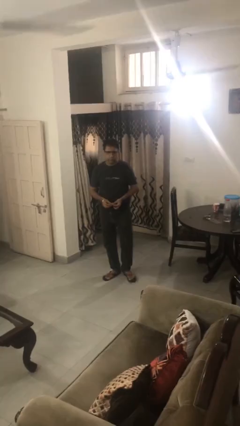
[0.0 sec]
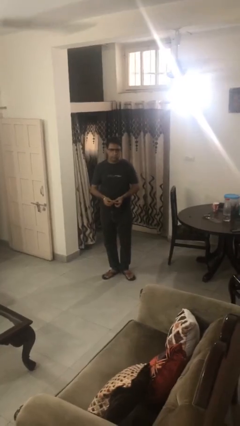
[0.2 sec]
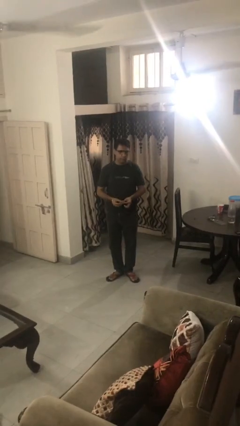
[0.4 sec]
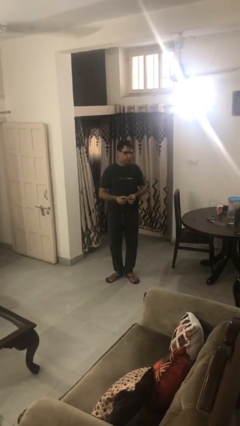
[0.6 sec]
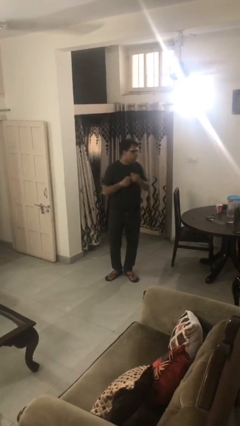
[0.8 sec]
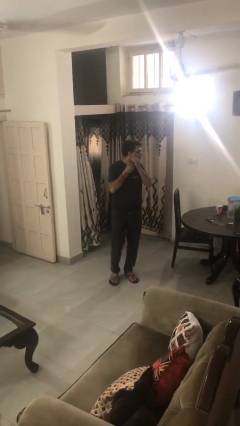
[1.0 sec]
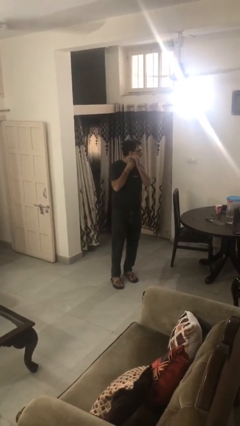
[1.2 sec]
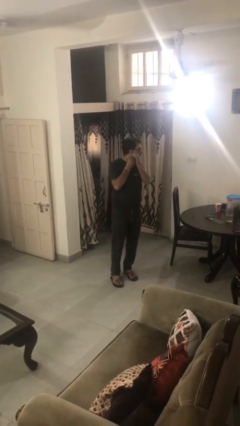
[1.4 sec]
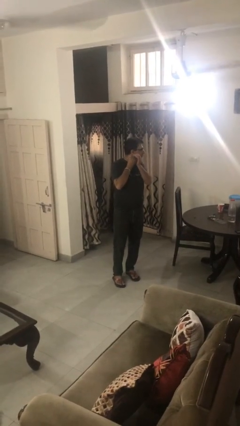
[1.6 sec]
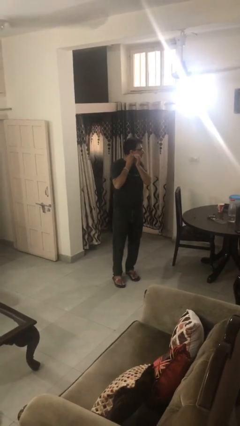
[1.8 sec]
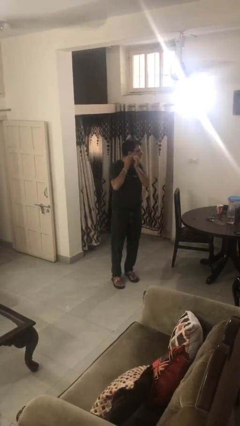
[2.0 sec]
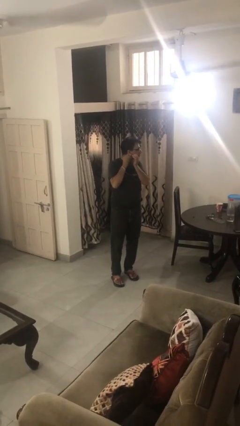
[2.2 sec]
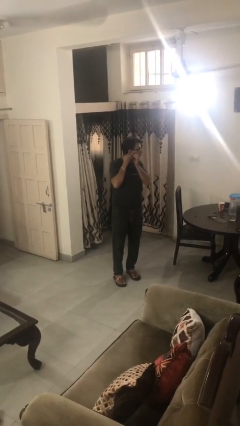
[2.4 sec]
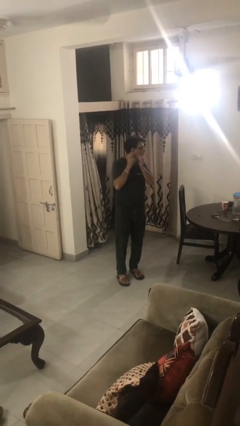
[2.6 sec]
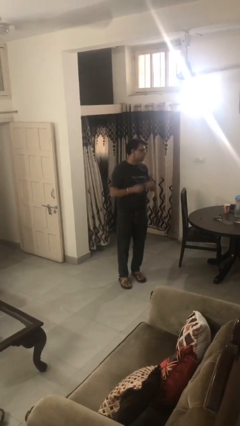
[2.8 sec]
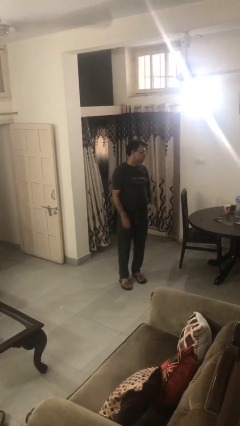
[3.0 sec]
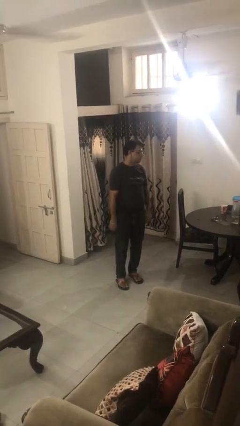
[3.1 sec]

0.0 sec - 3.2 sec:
person puts on earrings

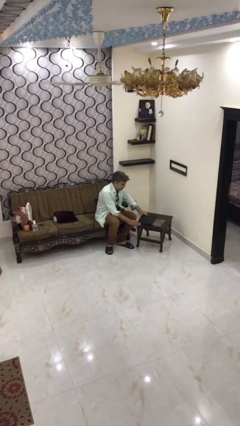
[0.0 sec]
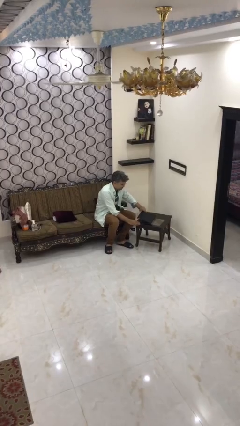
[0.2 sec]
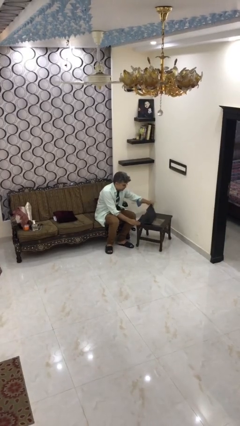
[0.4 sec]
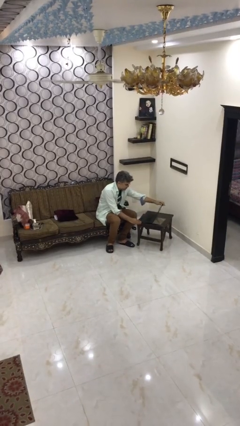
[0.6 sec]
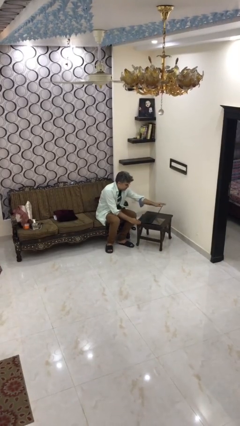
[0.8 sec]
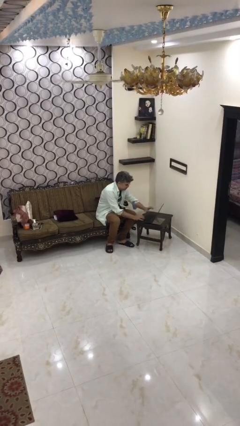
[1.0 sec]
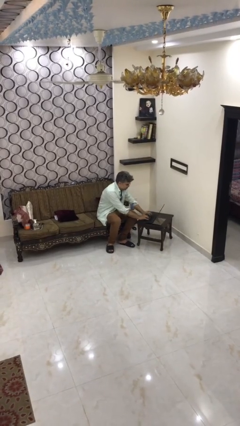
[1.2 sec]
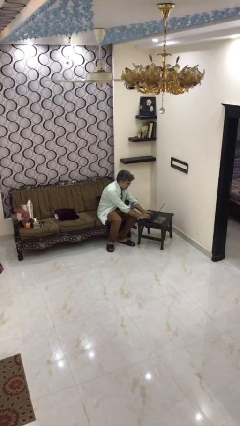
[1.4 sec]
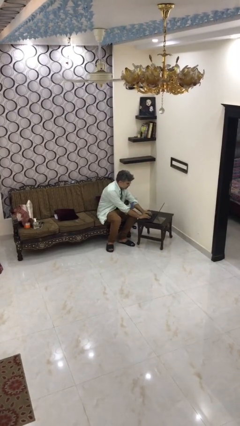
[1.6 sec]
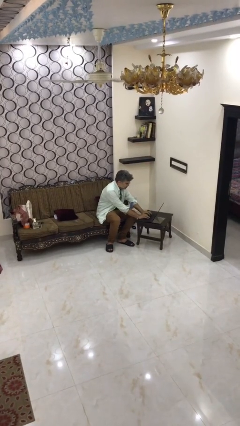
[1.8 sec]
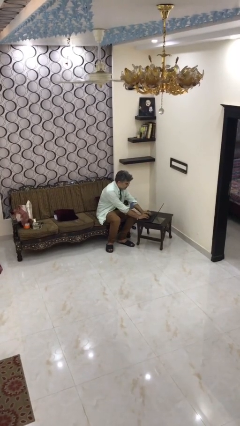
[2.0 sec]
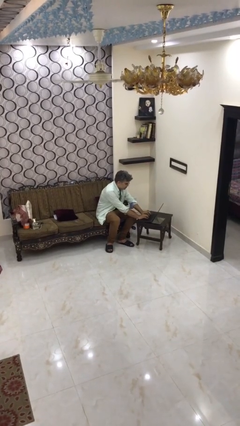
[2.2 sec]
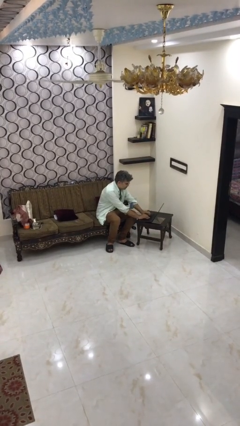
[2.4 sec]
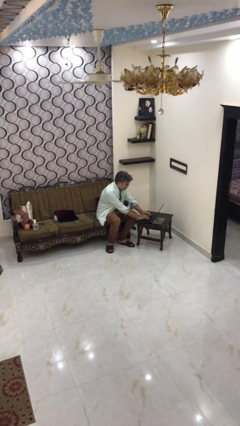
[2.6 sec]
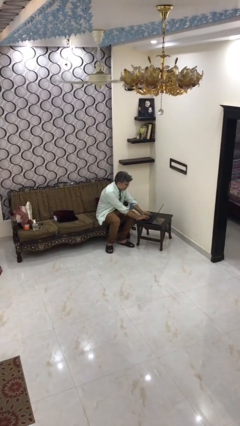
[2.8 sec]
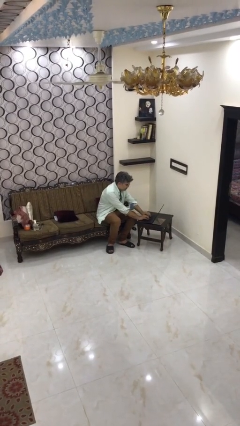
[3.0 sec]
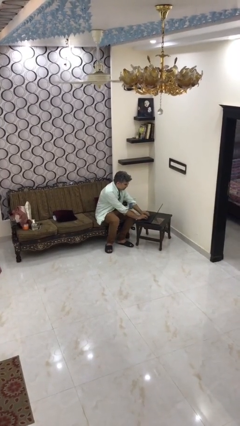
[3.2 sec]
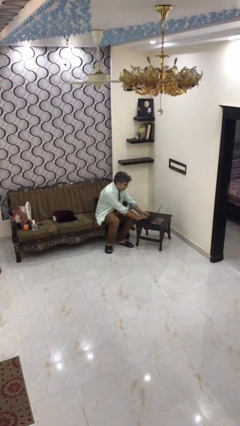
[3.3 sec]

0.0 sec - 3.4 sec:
person interacts with laptop

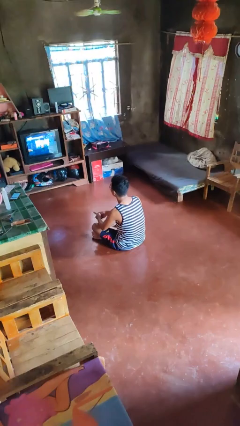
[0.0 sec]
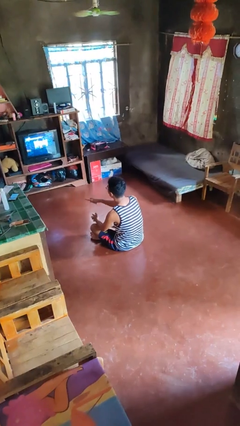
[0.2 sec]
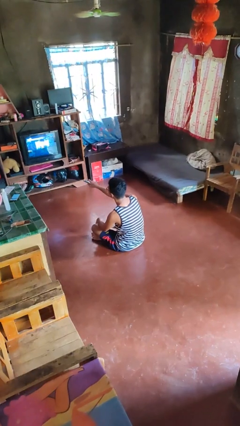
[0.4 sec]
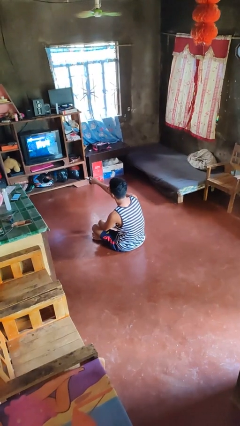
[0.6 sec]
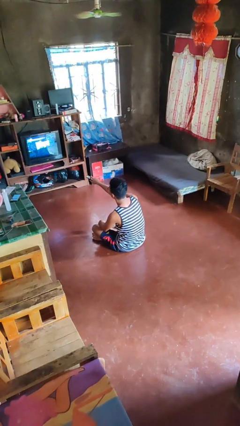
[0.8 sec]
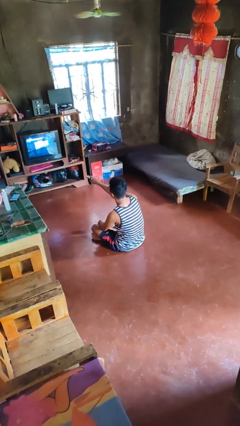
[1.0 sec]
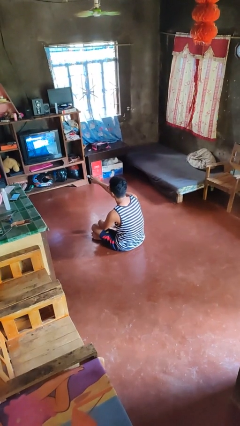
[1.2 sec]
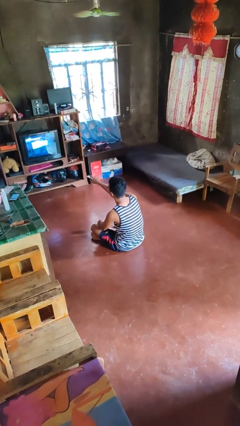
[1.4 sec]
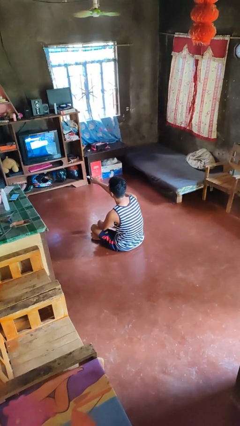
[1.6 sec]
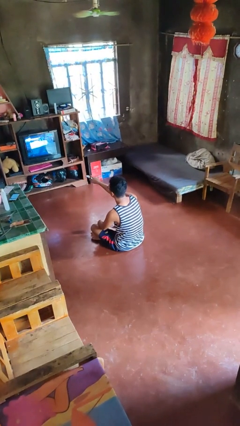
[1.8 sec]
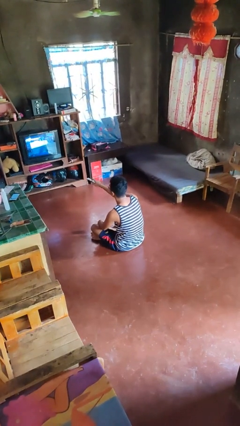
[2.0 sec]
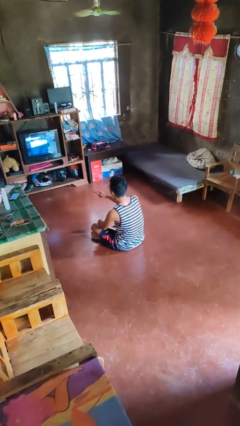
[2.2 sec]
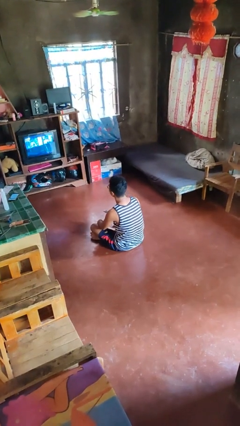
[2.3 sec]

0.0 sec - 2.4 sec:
person uses television remote

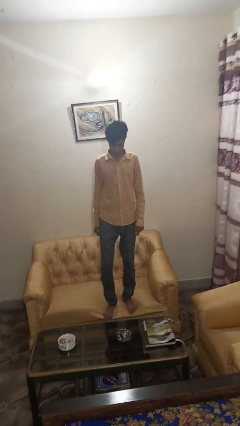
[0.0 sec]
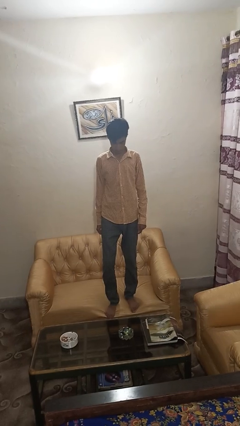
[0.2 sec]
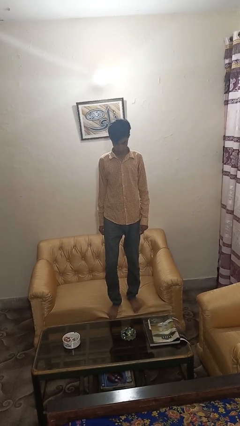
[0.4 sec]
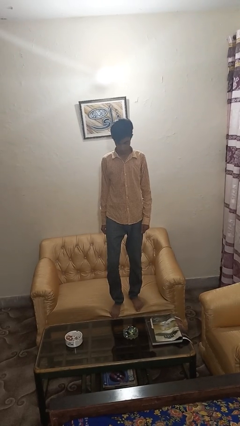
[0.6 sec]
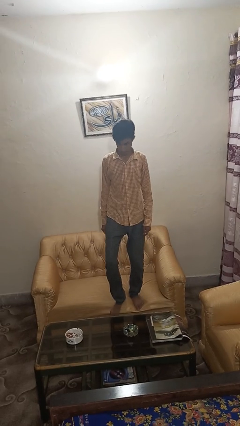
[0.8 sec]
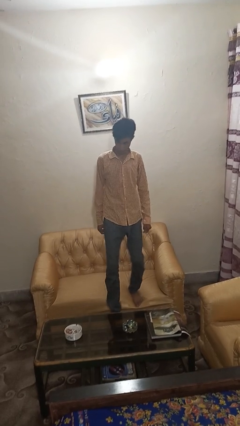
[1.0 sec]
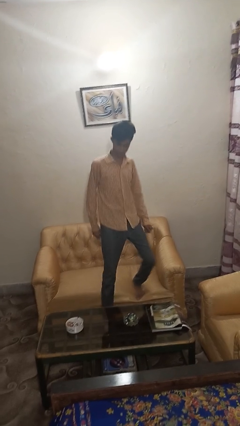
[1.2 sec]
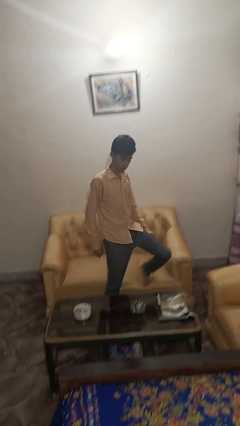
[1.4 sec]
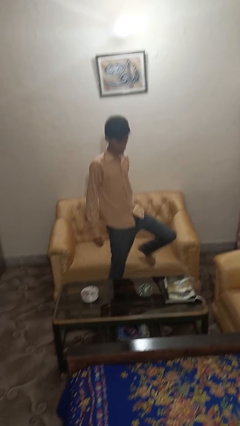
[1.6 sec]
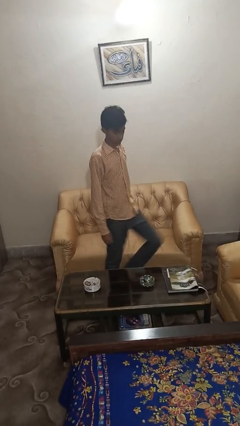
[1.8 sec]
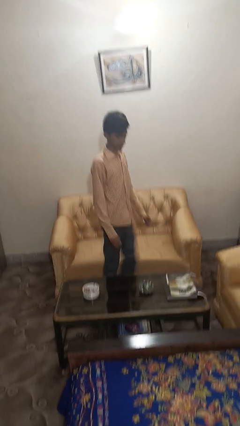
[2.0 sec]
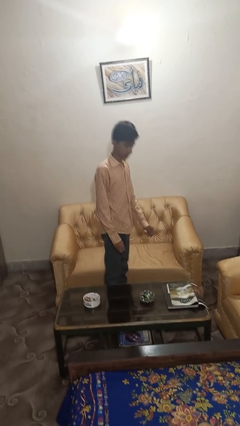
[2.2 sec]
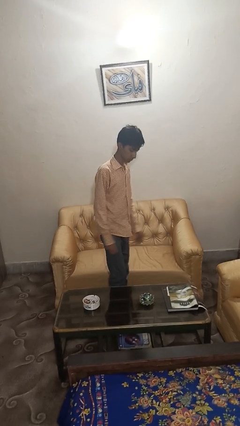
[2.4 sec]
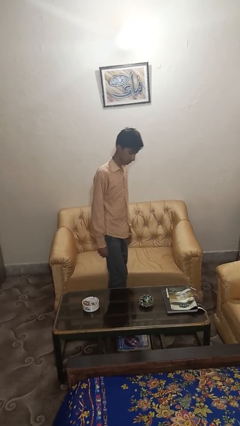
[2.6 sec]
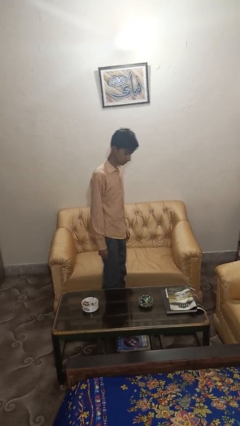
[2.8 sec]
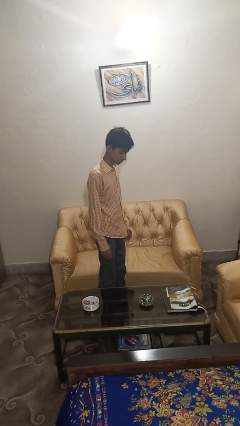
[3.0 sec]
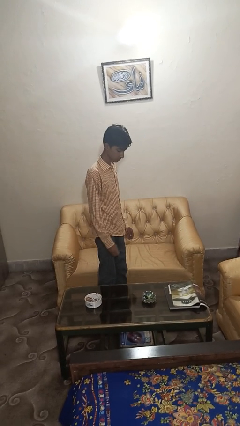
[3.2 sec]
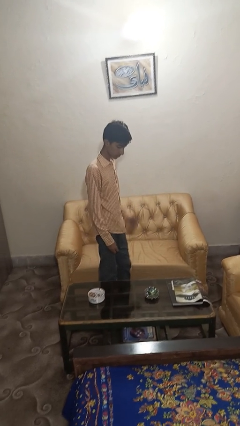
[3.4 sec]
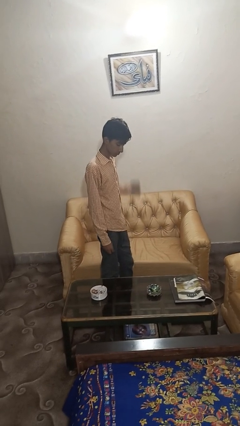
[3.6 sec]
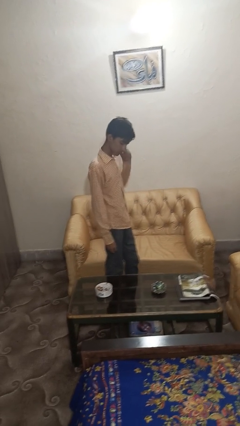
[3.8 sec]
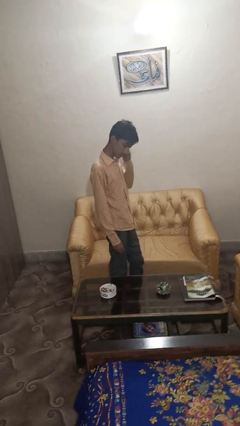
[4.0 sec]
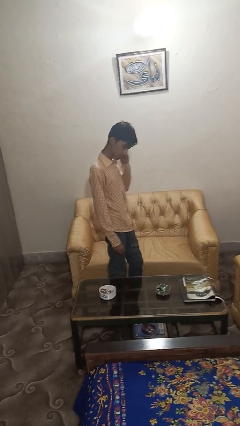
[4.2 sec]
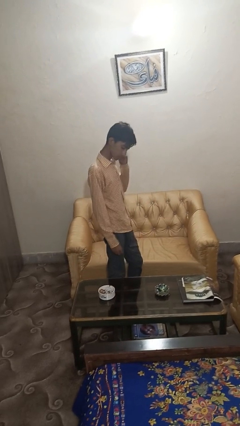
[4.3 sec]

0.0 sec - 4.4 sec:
person climbs off couch

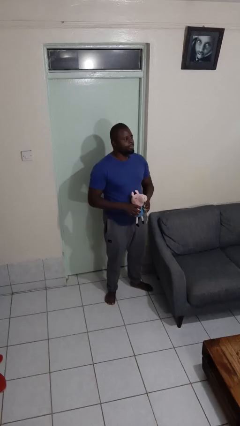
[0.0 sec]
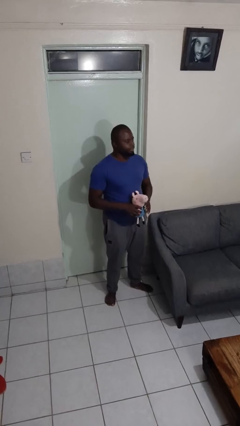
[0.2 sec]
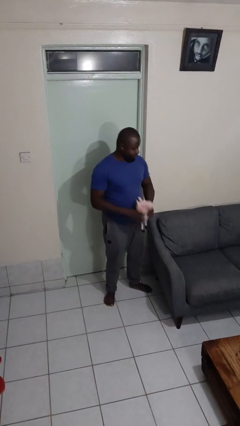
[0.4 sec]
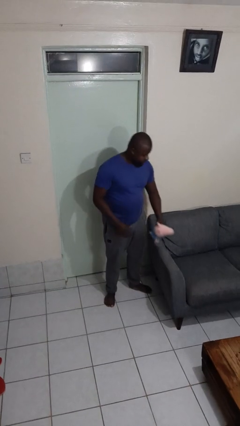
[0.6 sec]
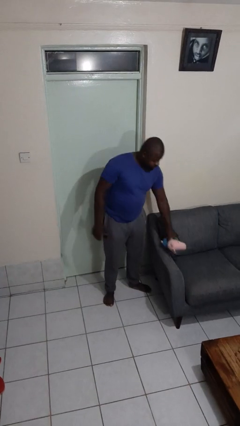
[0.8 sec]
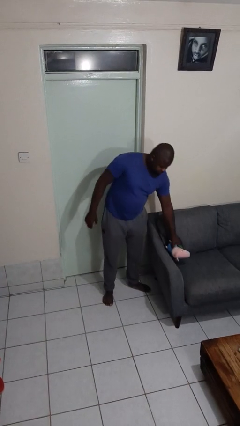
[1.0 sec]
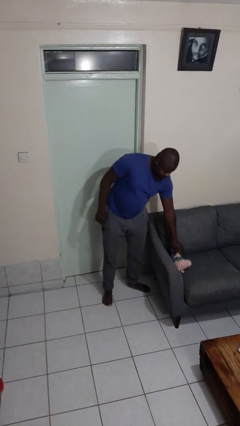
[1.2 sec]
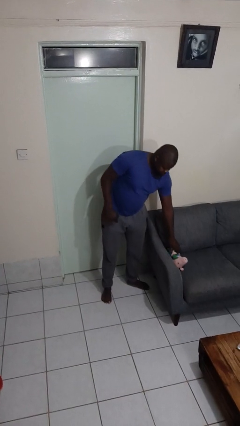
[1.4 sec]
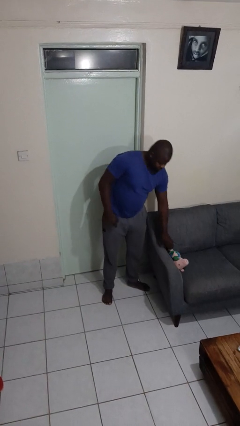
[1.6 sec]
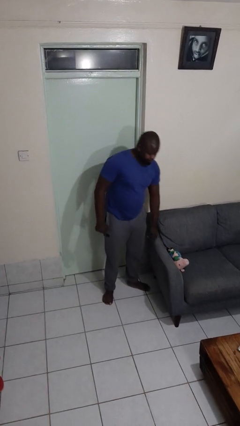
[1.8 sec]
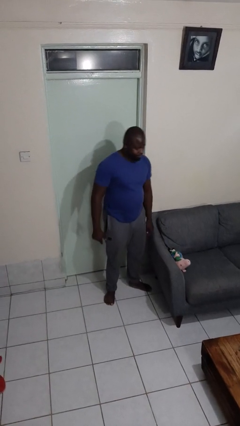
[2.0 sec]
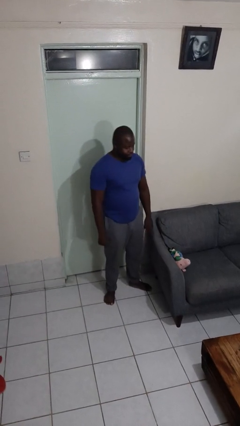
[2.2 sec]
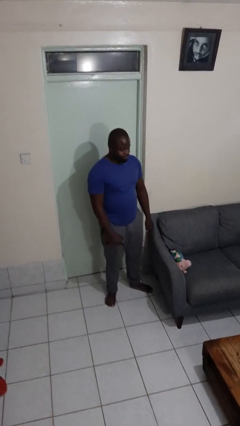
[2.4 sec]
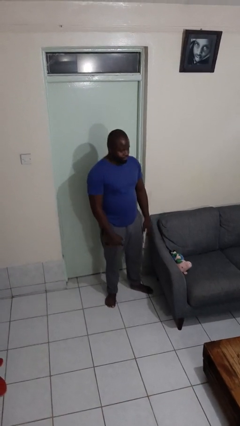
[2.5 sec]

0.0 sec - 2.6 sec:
person puts down object on couch

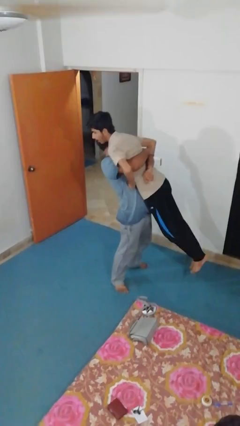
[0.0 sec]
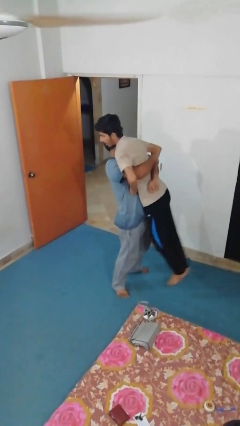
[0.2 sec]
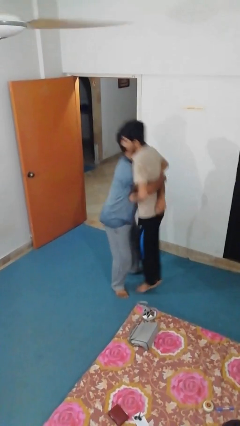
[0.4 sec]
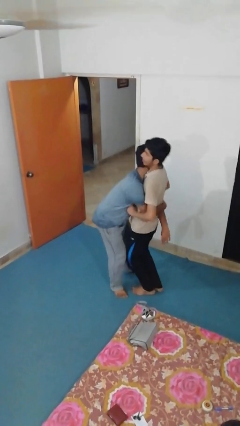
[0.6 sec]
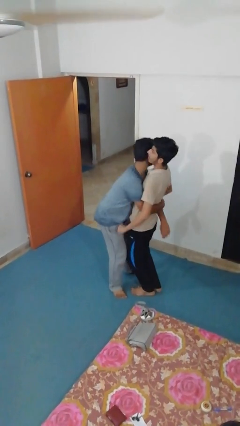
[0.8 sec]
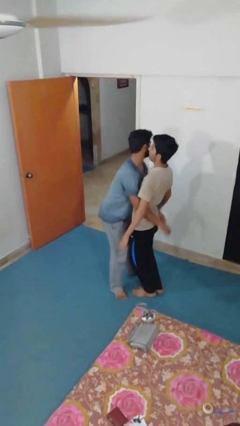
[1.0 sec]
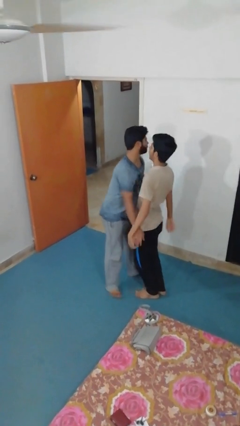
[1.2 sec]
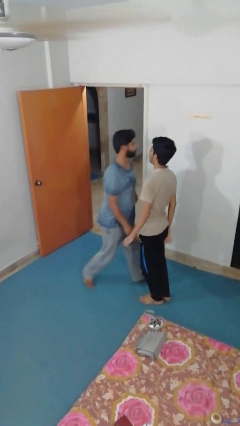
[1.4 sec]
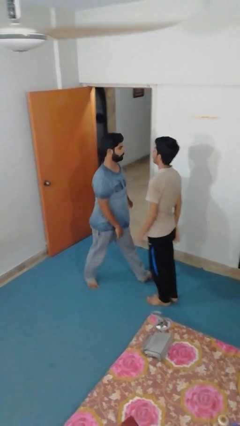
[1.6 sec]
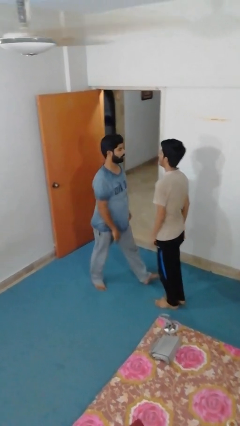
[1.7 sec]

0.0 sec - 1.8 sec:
person puts down person
